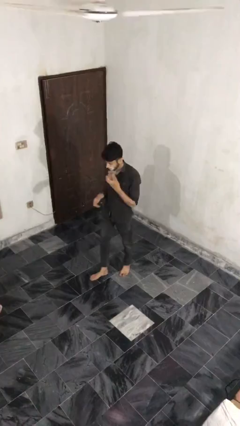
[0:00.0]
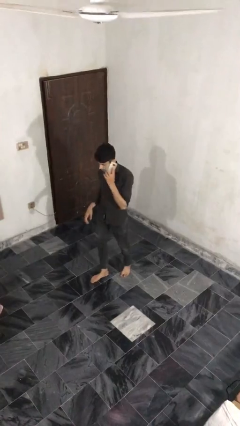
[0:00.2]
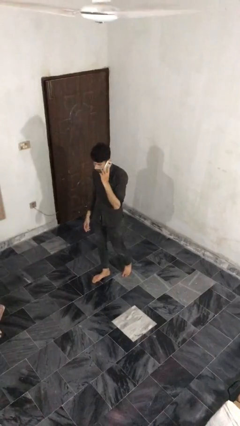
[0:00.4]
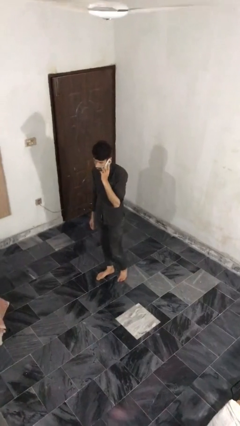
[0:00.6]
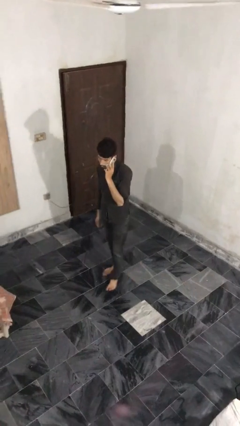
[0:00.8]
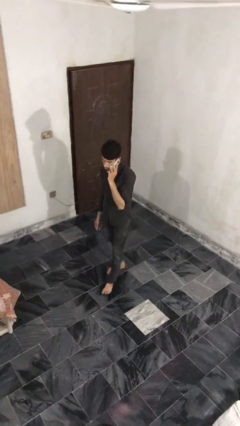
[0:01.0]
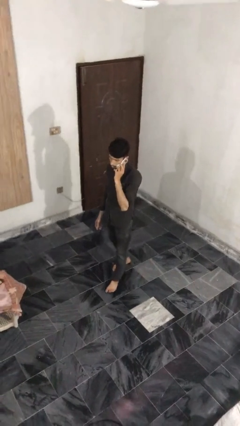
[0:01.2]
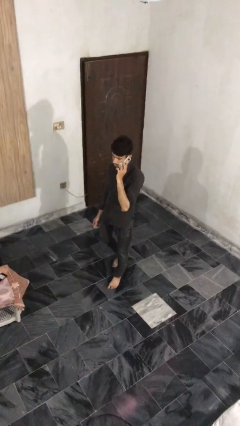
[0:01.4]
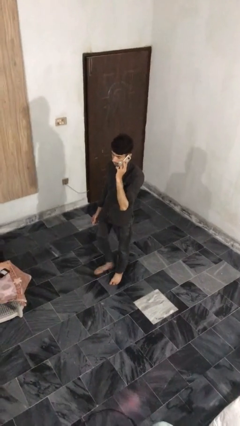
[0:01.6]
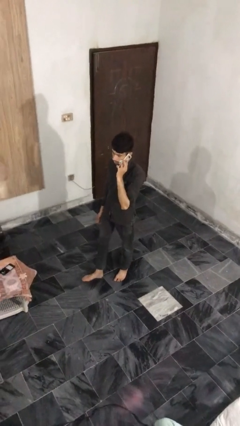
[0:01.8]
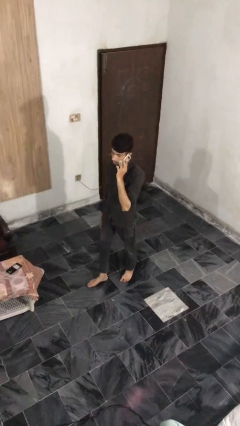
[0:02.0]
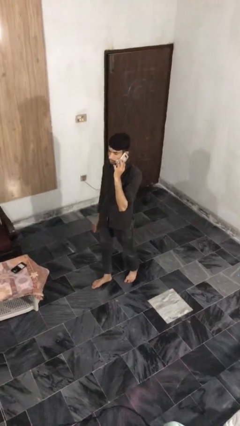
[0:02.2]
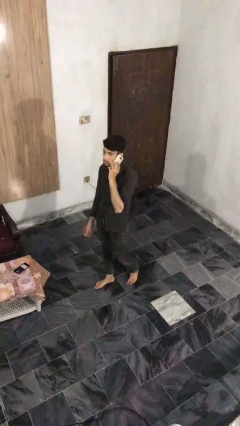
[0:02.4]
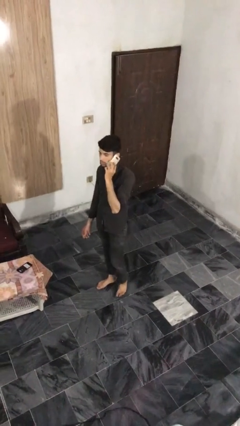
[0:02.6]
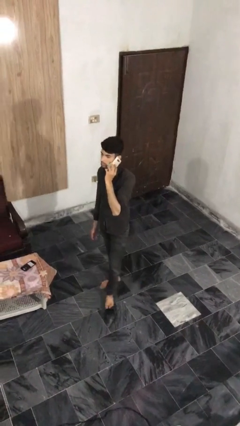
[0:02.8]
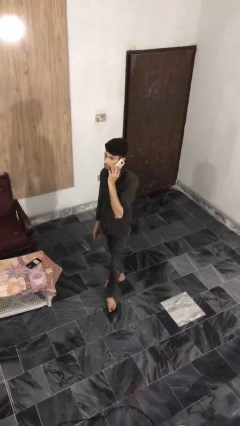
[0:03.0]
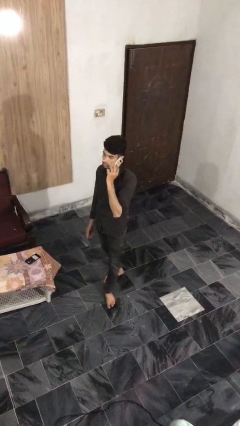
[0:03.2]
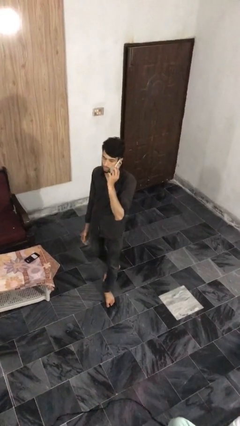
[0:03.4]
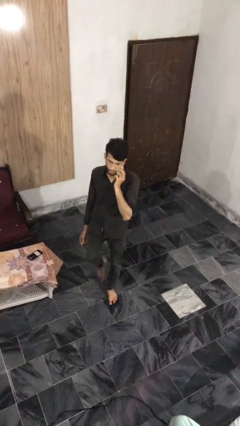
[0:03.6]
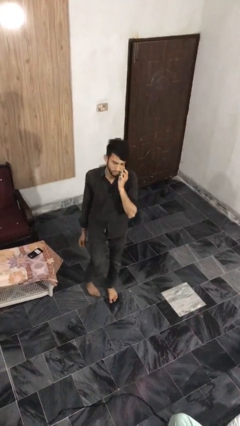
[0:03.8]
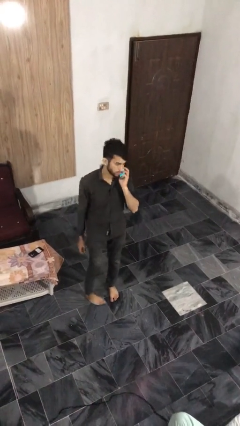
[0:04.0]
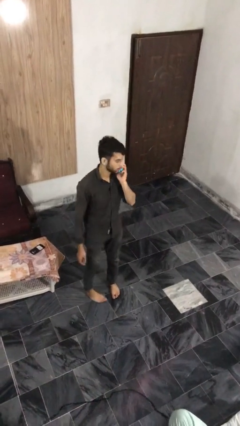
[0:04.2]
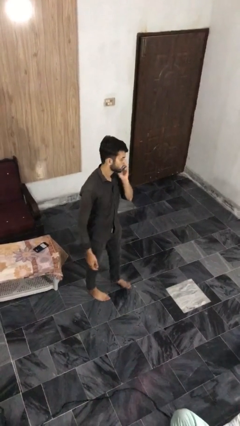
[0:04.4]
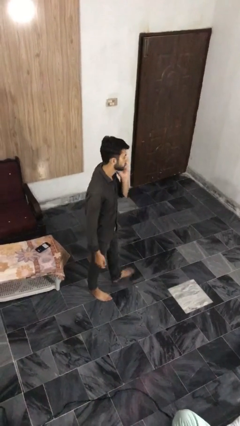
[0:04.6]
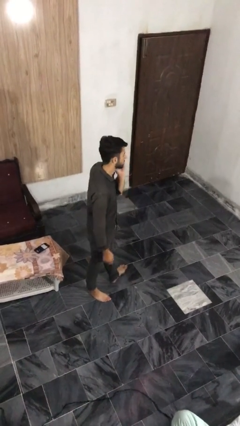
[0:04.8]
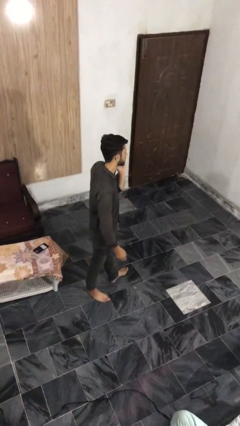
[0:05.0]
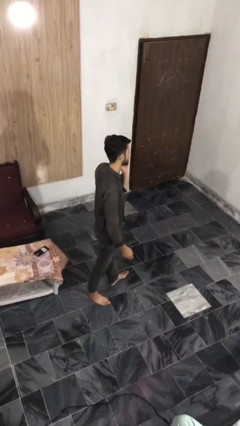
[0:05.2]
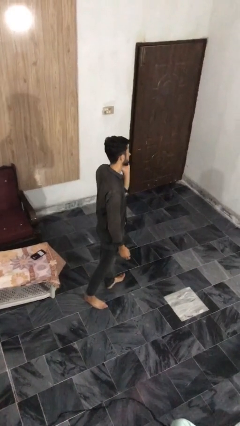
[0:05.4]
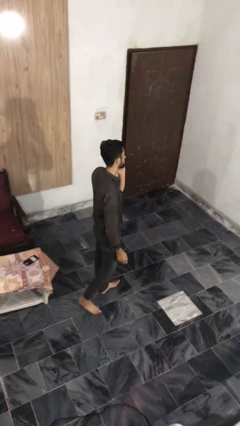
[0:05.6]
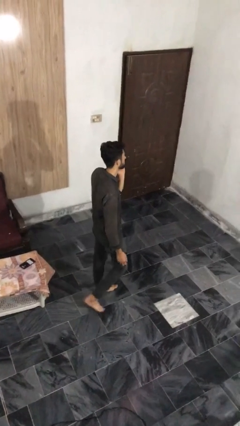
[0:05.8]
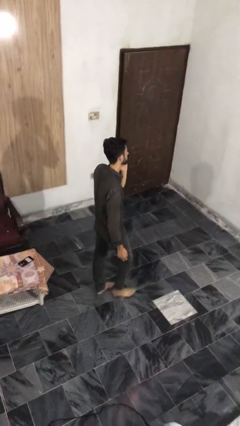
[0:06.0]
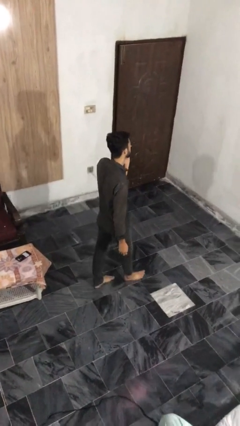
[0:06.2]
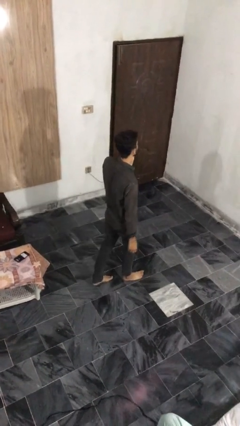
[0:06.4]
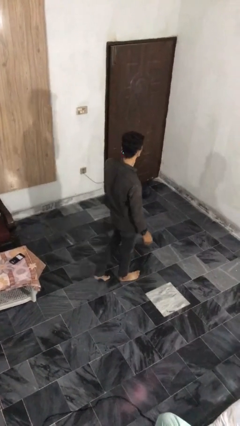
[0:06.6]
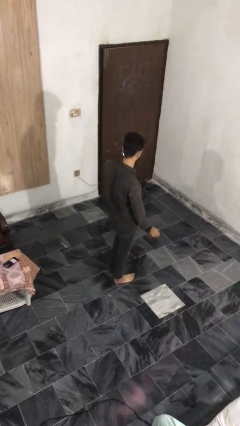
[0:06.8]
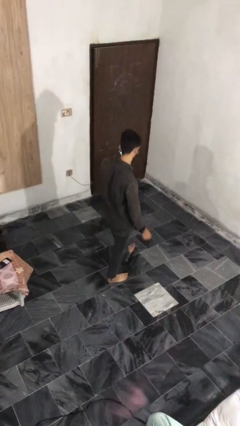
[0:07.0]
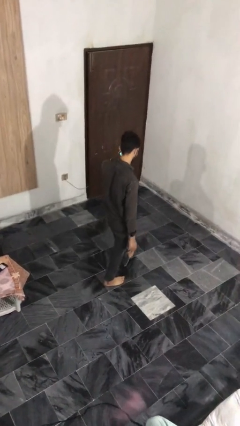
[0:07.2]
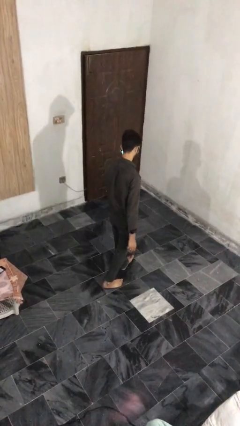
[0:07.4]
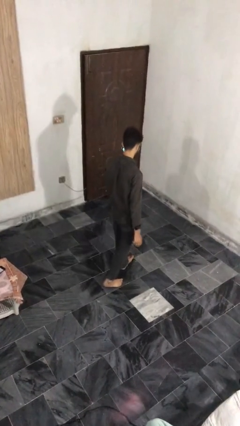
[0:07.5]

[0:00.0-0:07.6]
person talks on phone

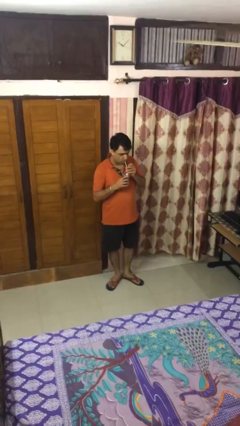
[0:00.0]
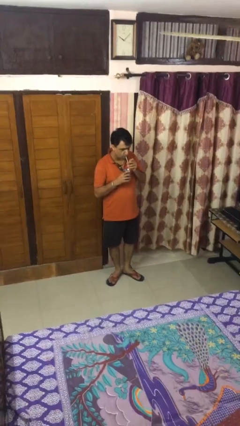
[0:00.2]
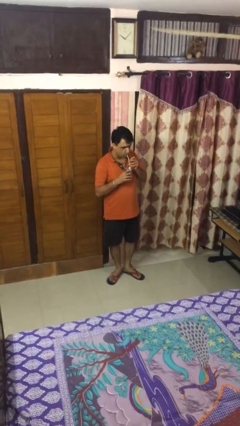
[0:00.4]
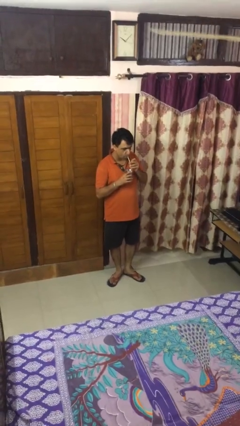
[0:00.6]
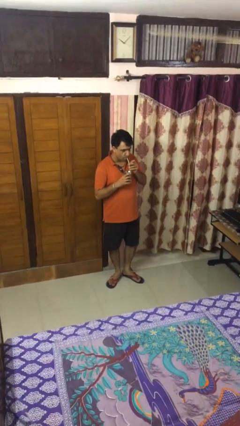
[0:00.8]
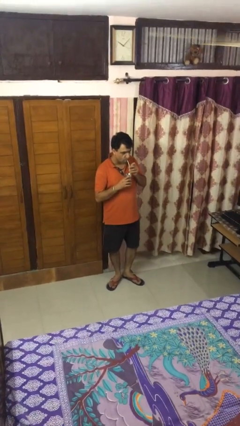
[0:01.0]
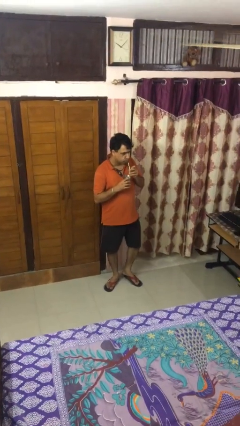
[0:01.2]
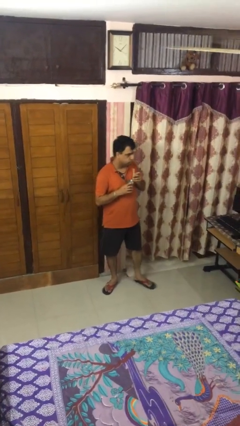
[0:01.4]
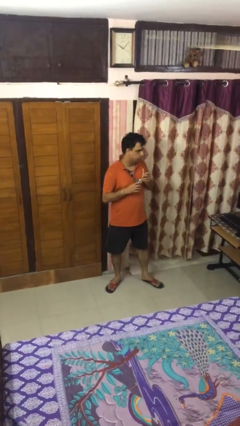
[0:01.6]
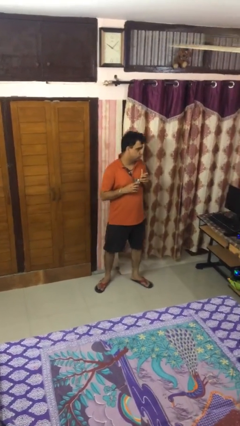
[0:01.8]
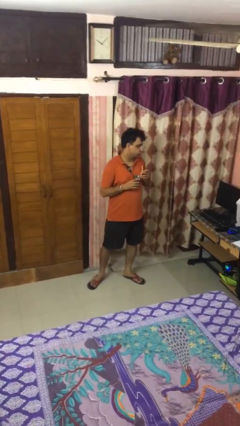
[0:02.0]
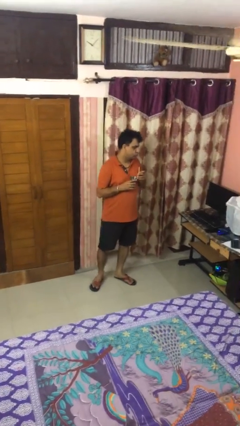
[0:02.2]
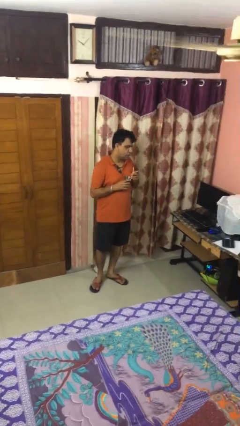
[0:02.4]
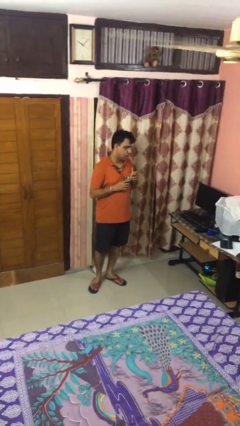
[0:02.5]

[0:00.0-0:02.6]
person drinks from straw

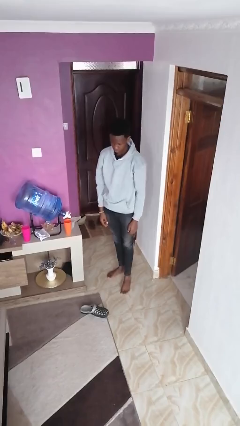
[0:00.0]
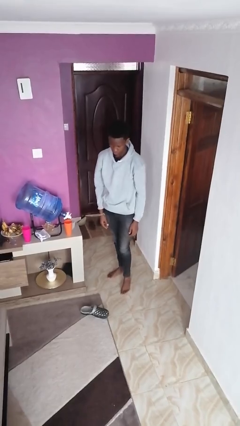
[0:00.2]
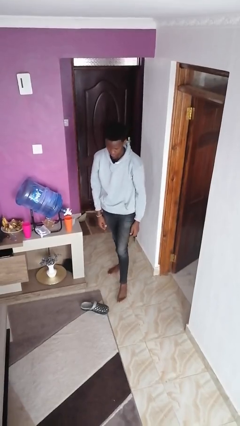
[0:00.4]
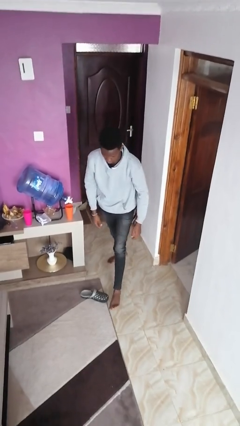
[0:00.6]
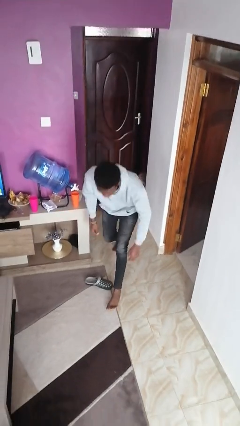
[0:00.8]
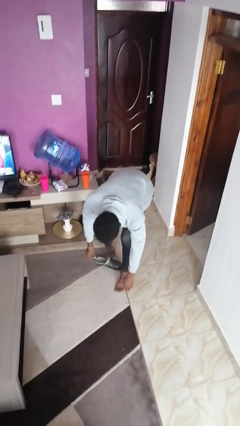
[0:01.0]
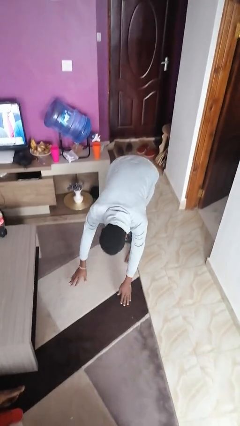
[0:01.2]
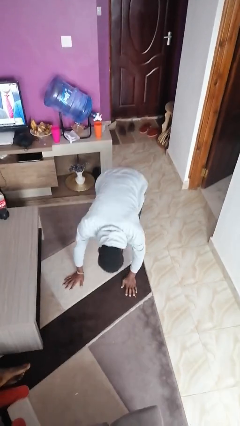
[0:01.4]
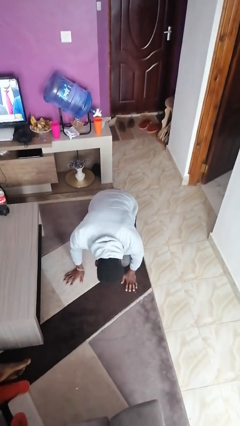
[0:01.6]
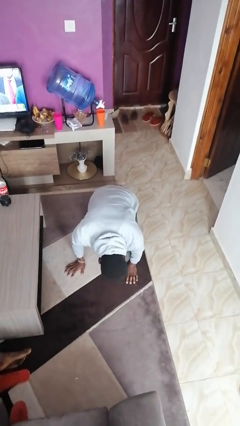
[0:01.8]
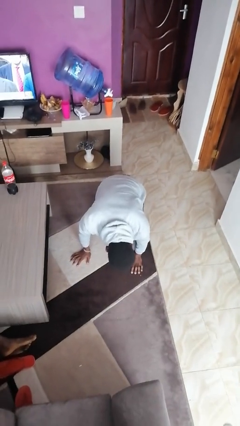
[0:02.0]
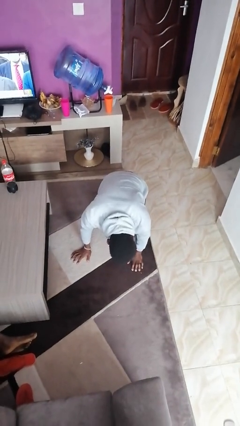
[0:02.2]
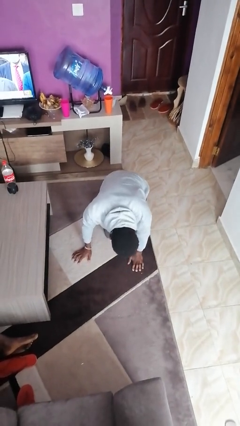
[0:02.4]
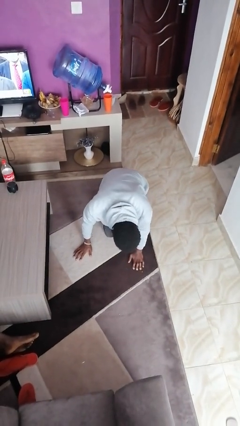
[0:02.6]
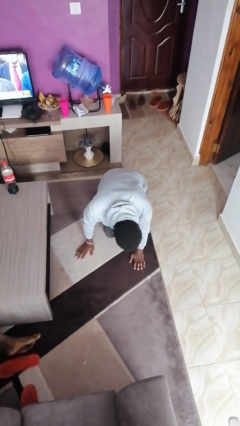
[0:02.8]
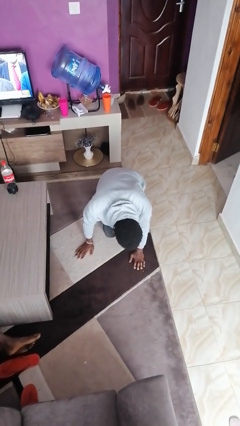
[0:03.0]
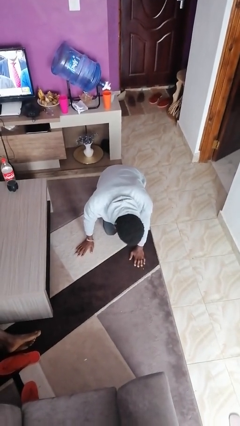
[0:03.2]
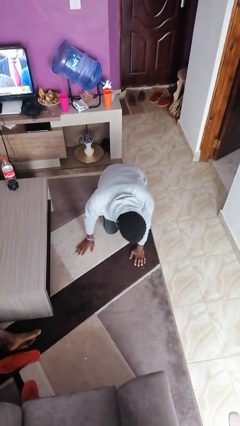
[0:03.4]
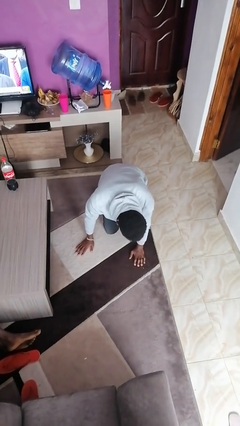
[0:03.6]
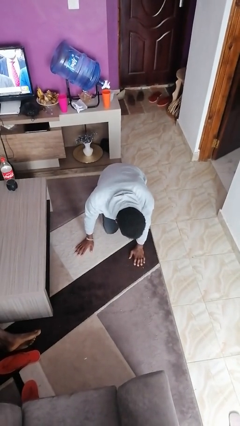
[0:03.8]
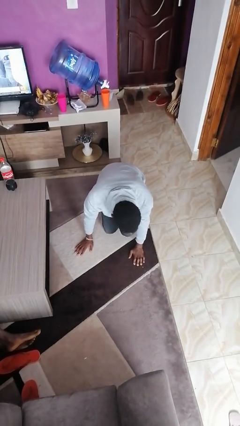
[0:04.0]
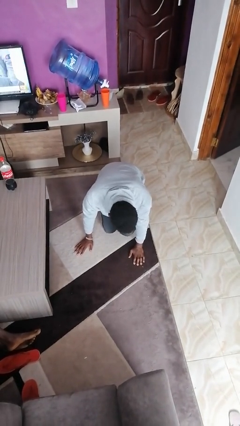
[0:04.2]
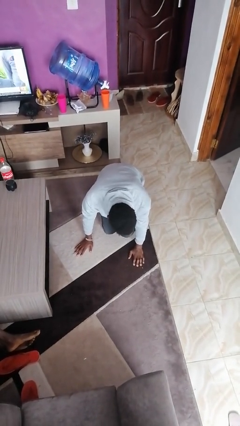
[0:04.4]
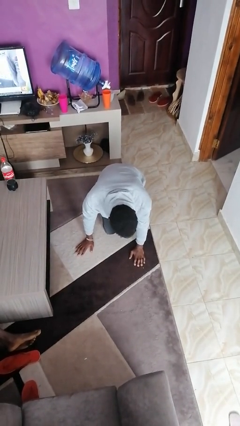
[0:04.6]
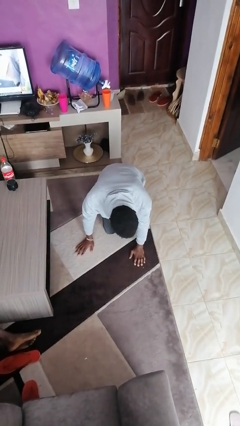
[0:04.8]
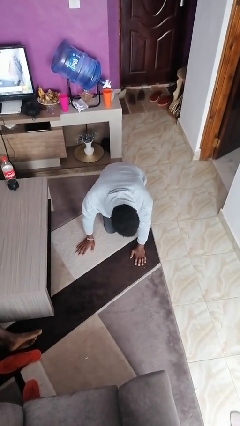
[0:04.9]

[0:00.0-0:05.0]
person trips on object on floor

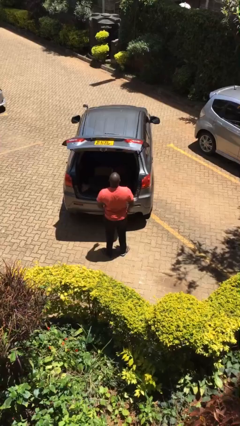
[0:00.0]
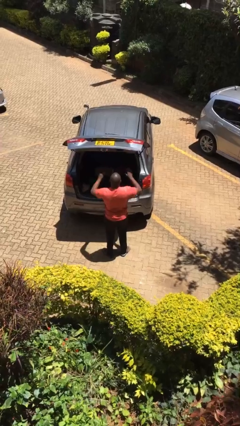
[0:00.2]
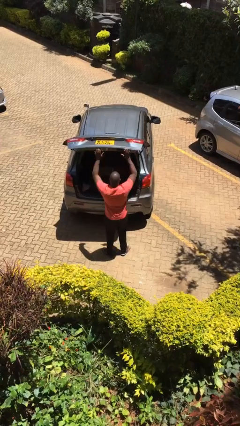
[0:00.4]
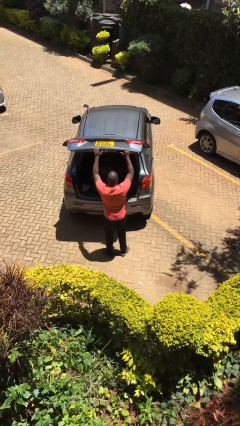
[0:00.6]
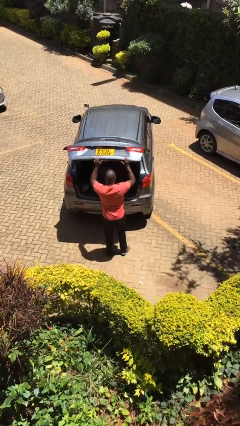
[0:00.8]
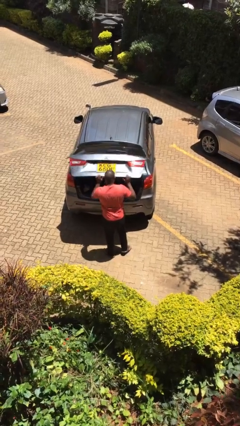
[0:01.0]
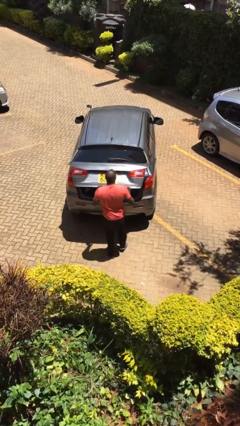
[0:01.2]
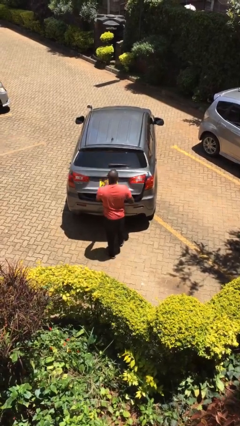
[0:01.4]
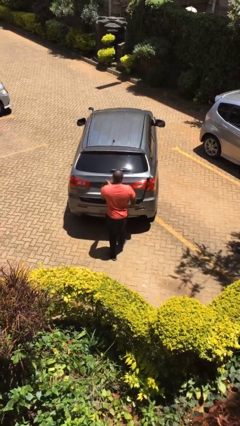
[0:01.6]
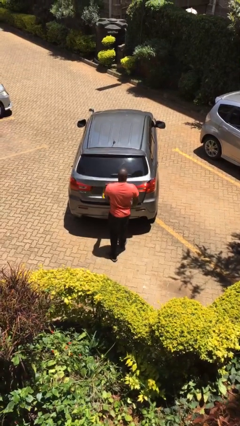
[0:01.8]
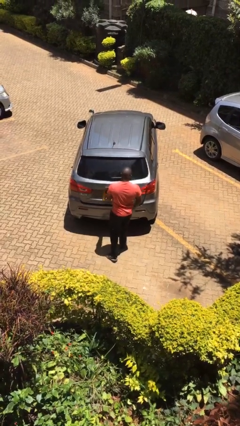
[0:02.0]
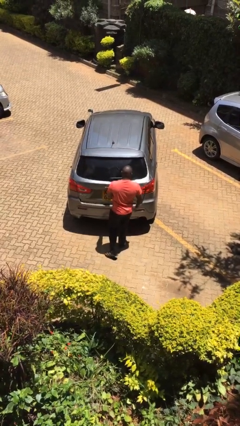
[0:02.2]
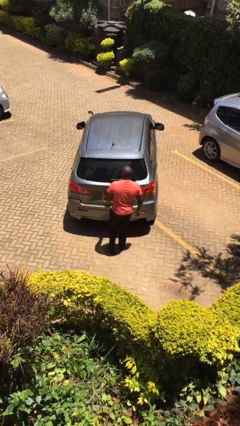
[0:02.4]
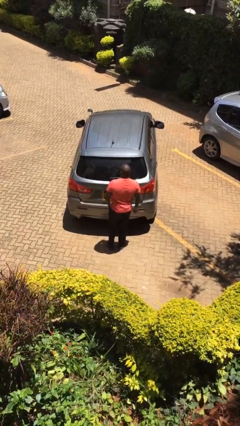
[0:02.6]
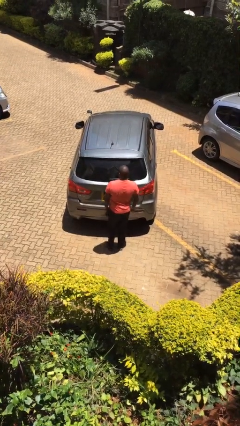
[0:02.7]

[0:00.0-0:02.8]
person closes car trunk
